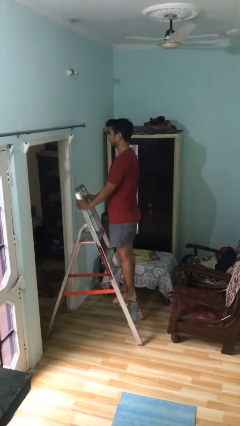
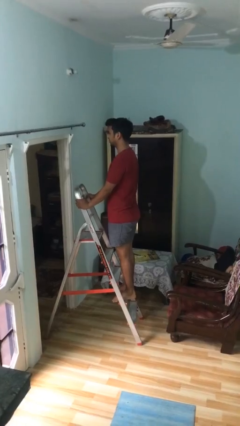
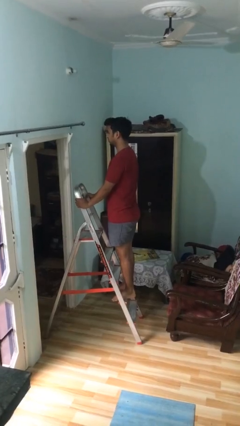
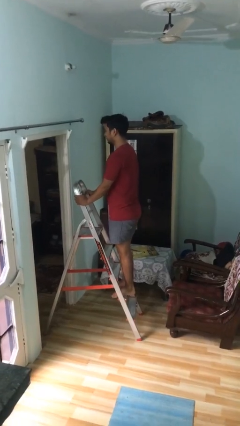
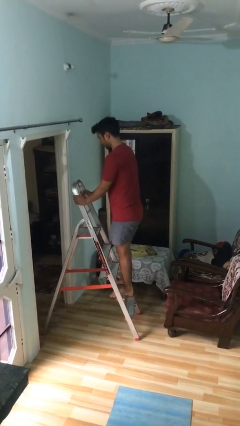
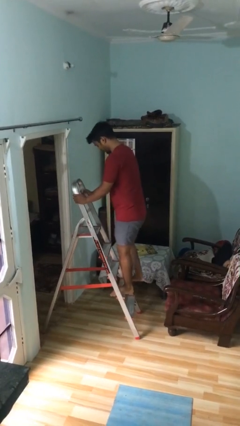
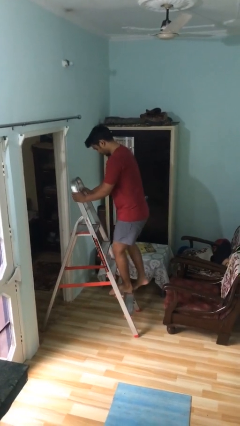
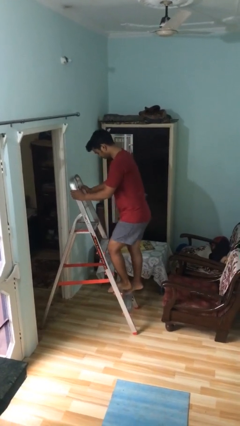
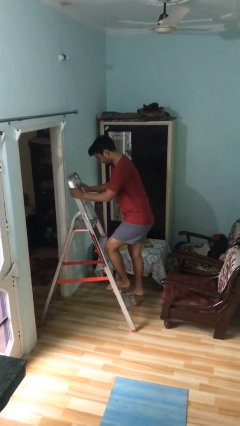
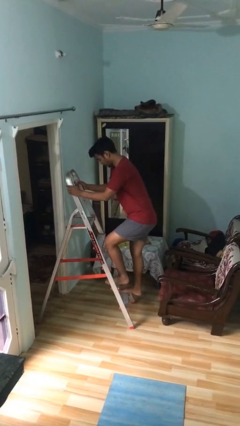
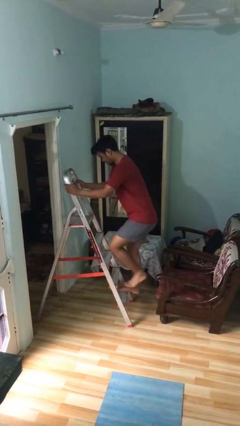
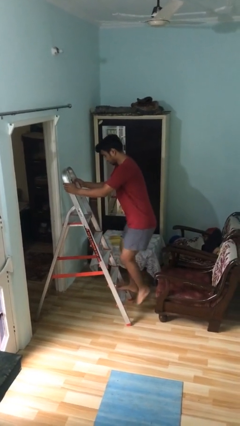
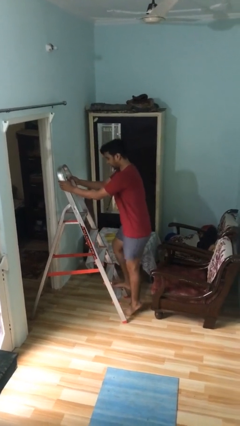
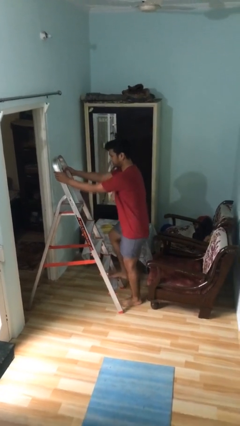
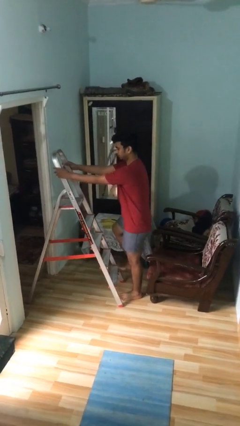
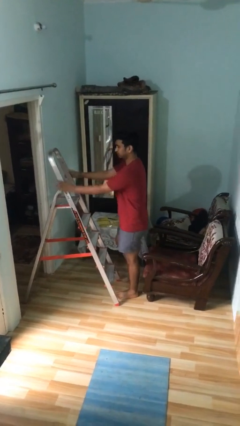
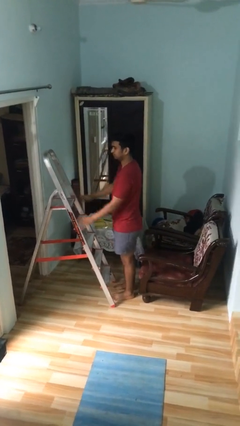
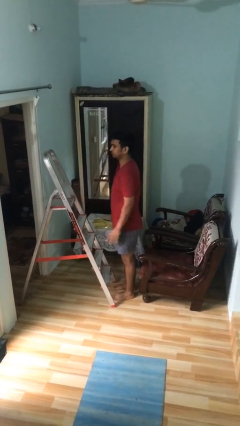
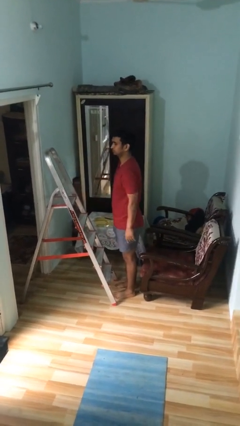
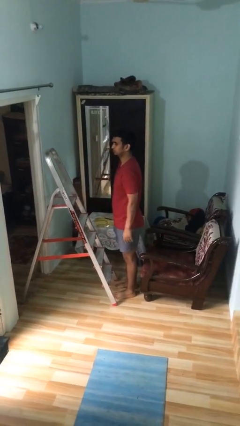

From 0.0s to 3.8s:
person climbs down ladder

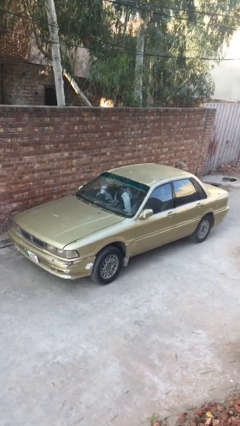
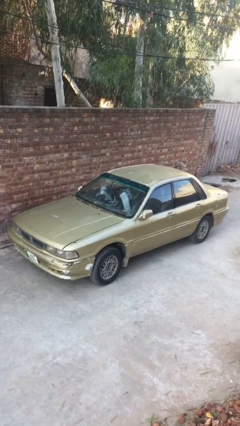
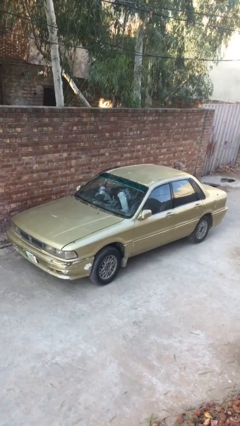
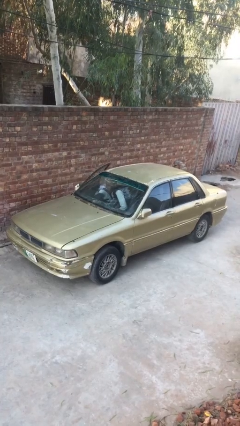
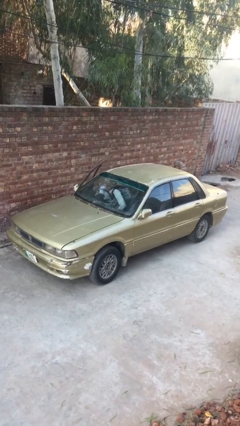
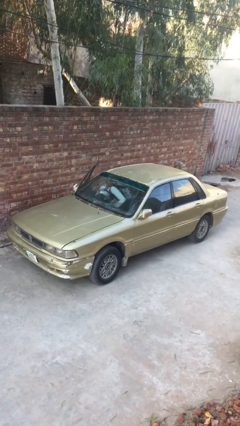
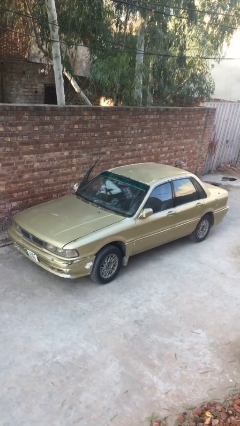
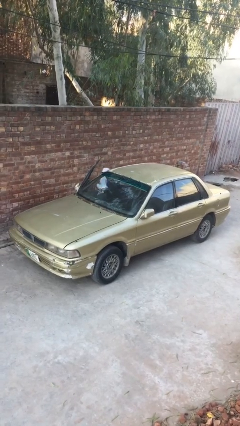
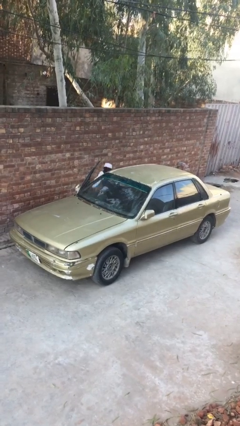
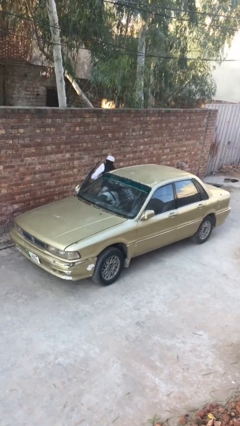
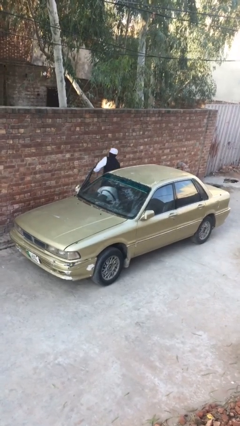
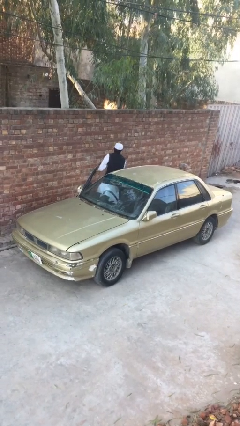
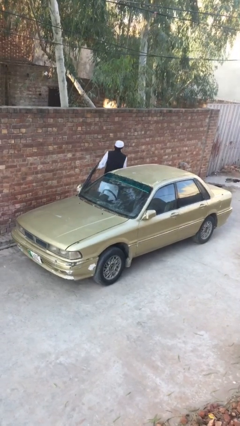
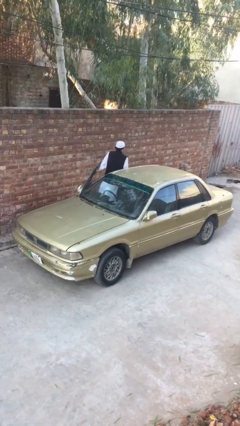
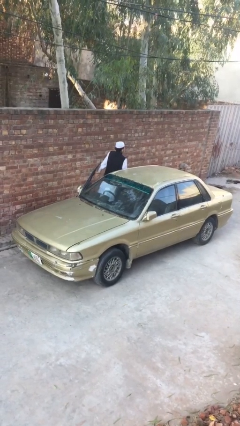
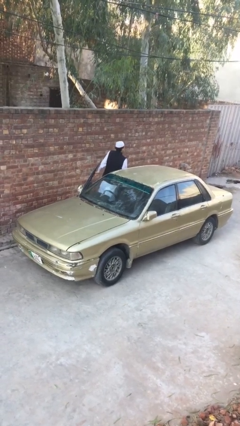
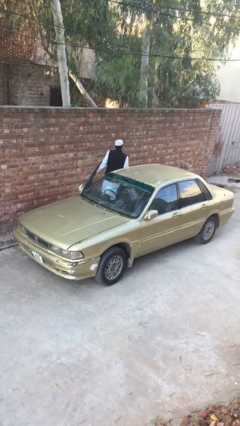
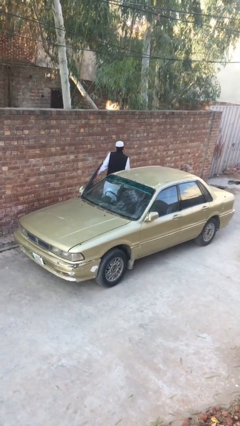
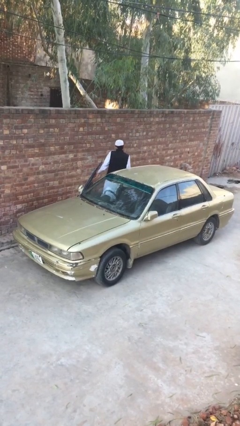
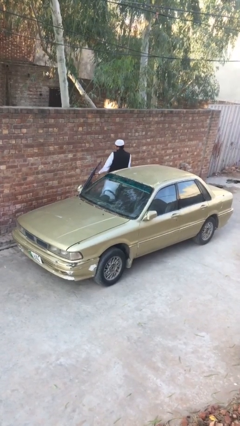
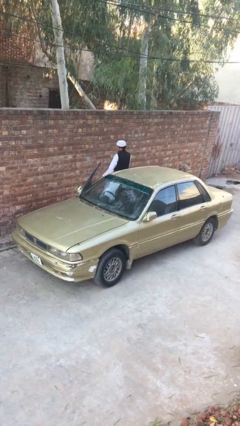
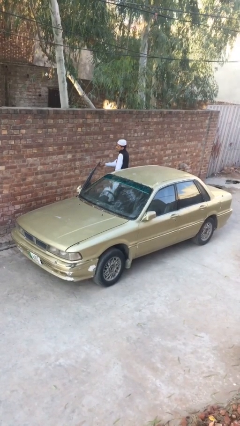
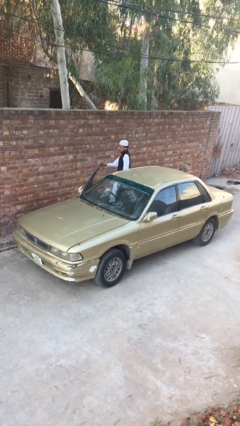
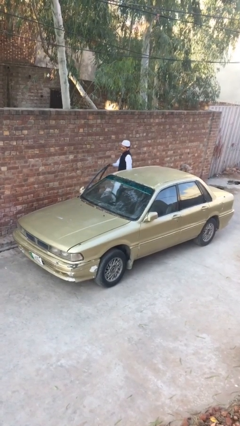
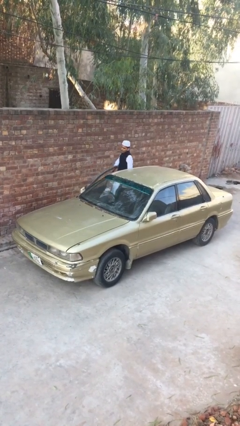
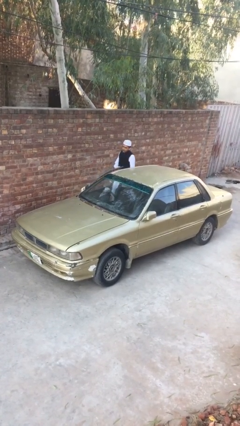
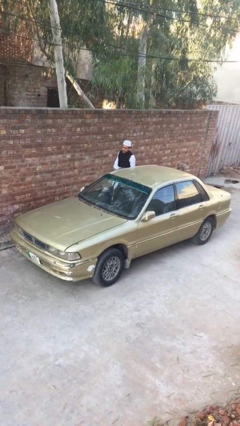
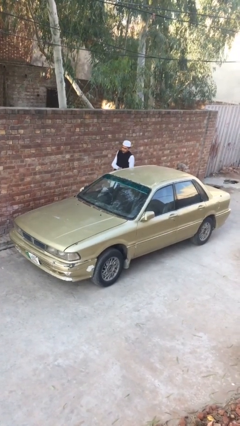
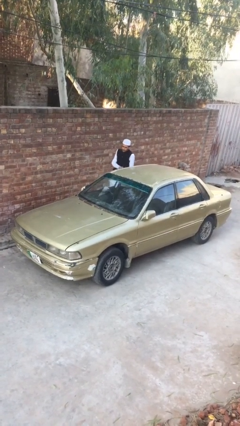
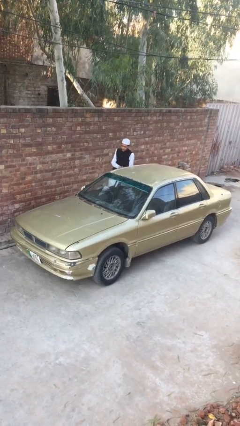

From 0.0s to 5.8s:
car drops off person

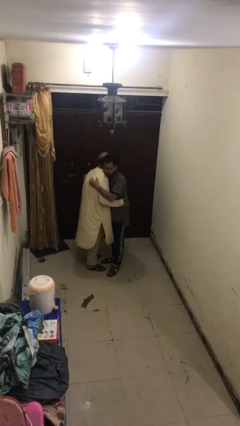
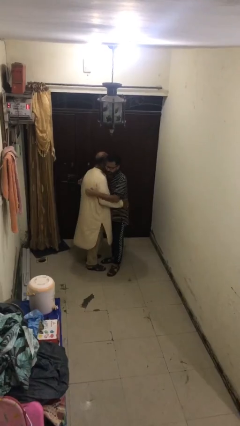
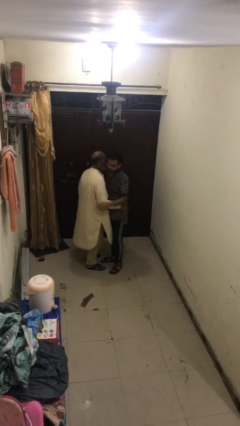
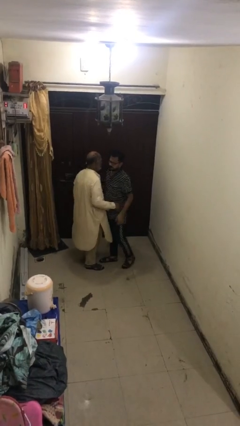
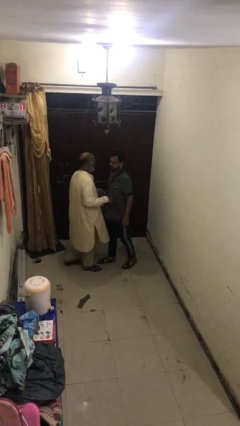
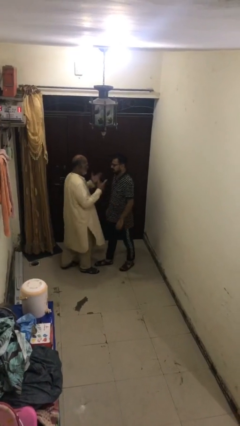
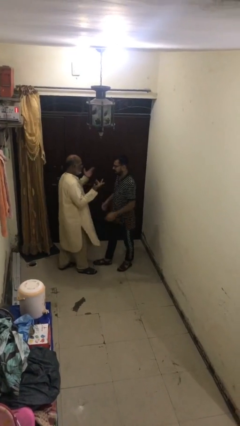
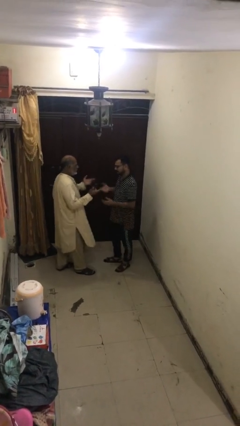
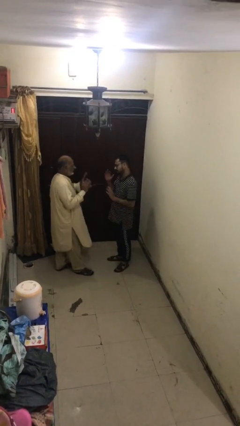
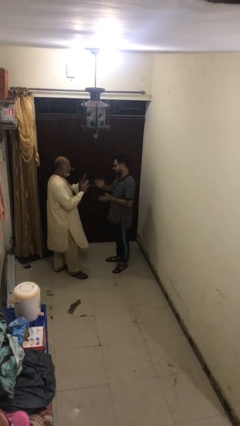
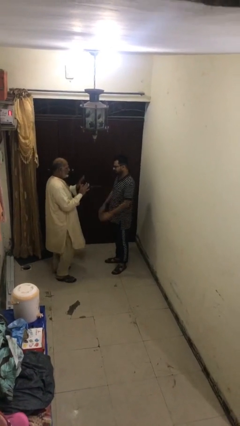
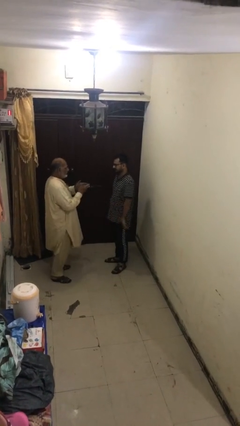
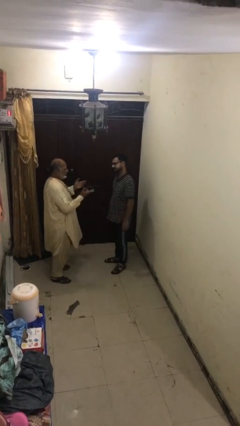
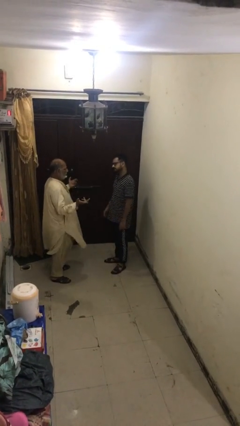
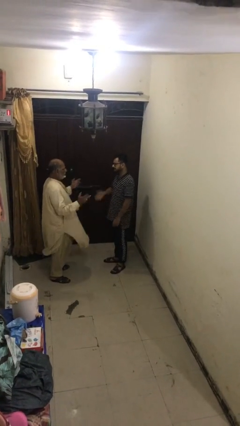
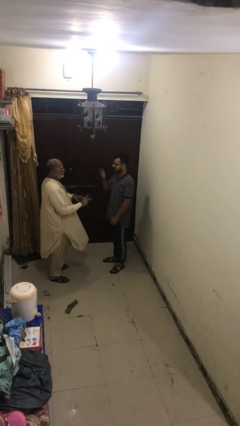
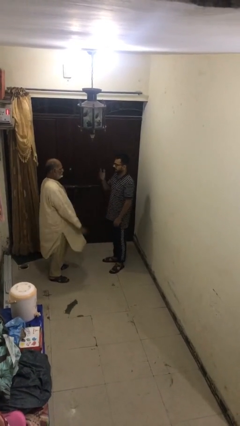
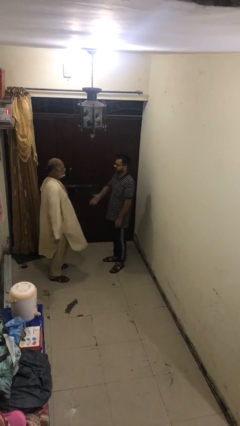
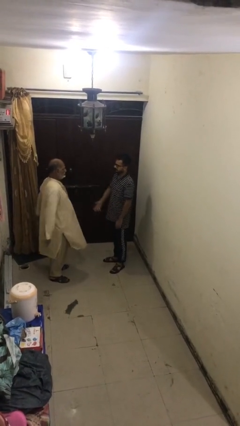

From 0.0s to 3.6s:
person talks to person

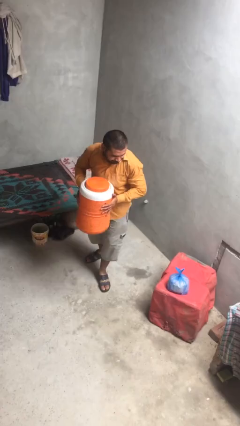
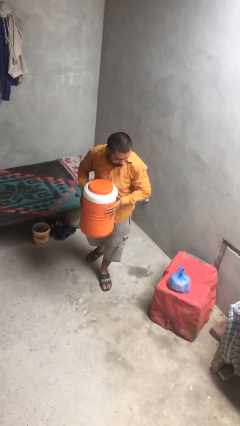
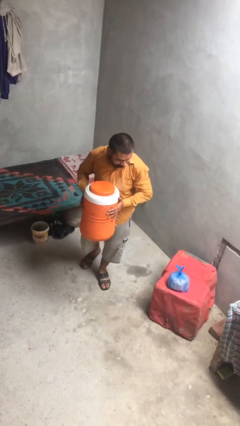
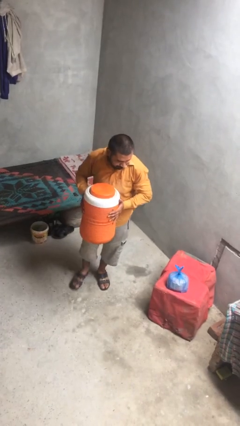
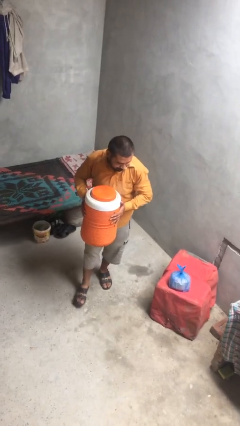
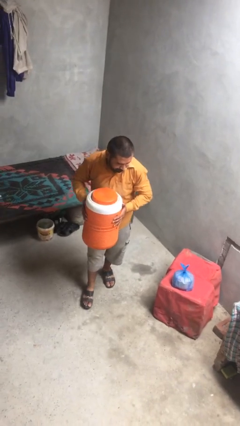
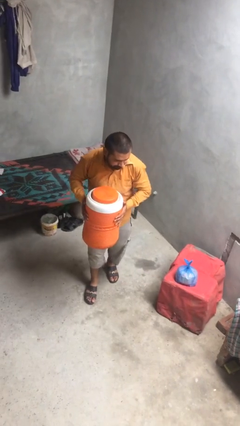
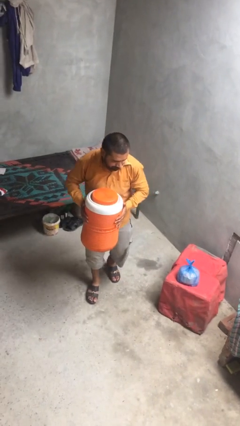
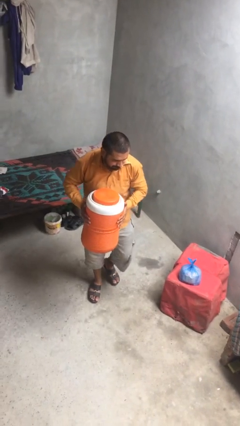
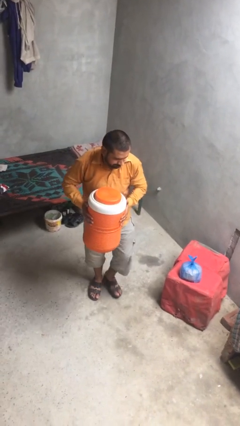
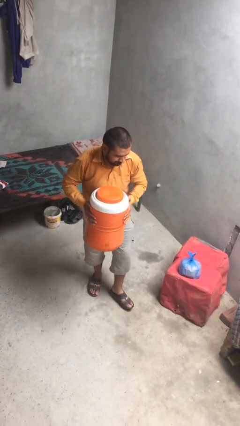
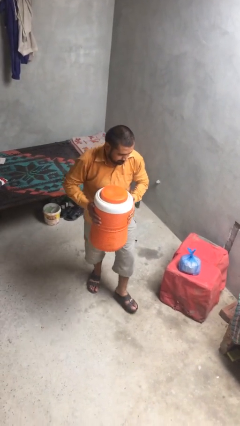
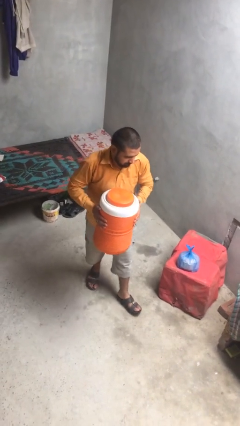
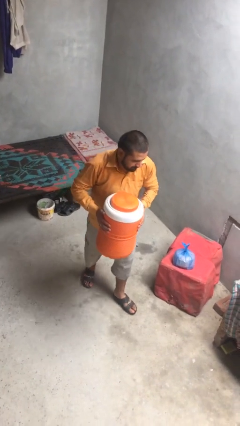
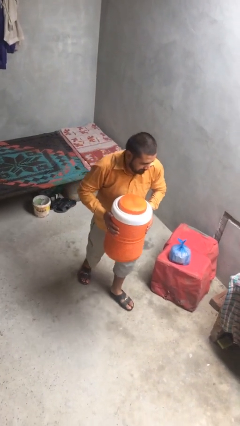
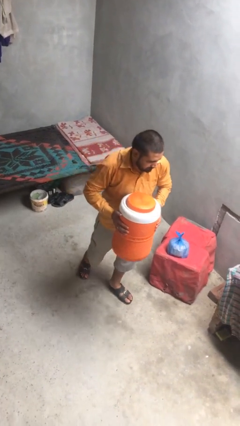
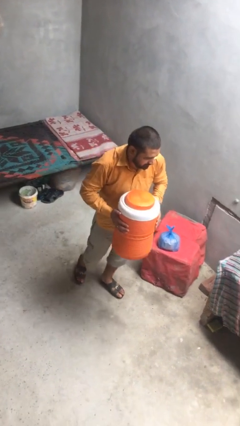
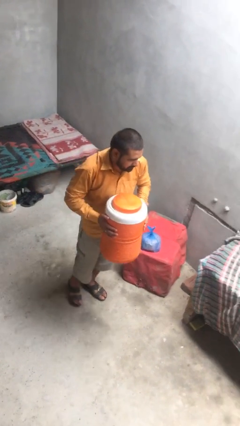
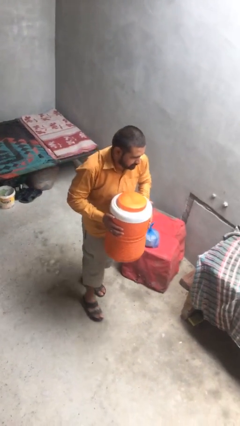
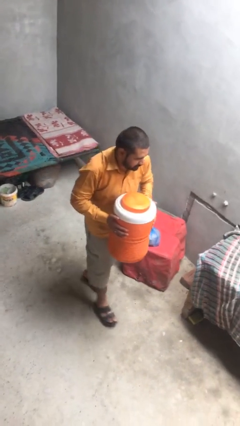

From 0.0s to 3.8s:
person carries heavy object

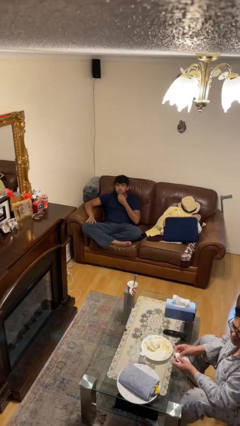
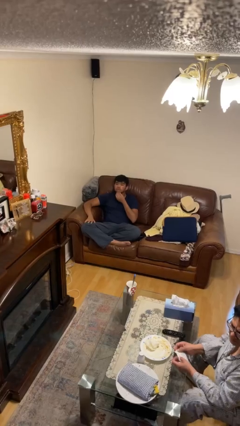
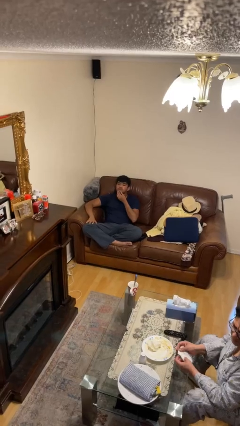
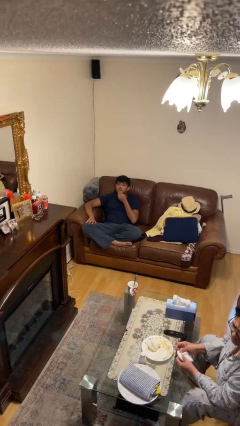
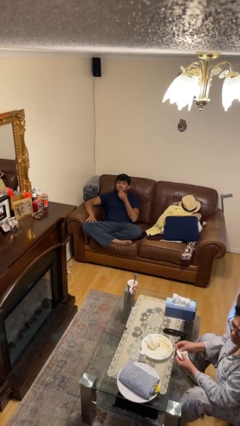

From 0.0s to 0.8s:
person strokes chin
